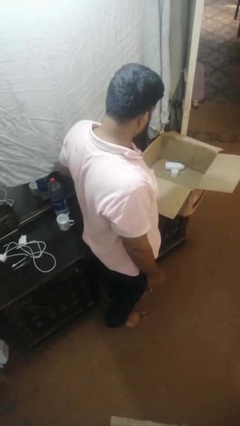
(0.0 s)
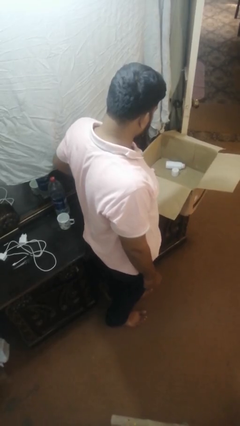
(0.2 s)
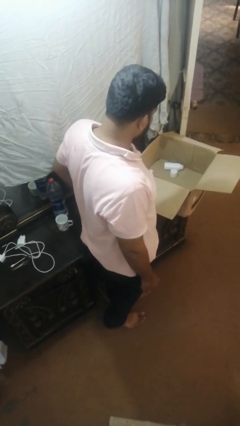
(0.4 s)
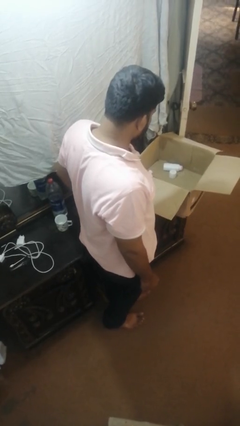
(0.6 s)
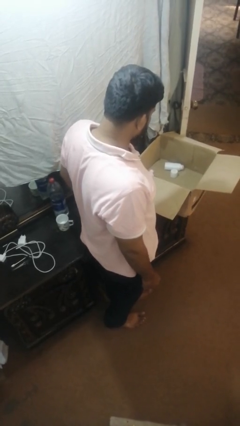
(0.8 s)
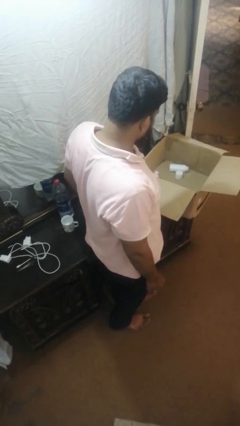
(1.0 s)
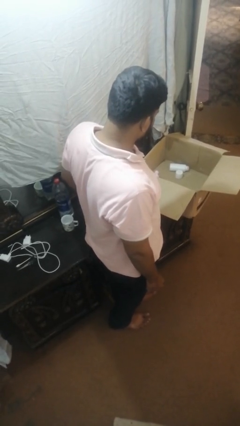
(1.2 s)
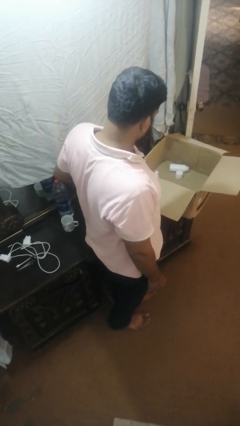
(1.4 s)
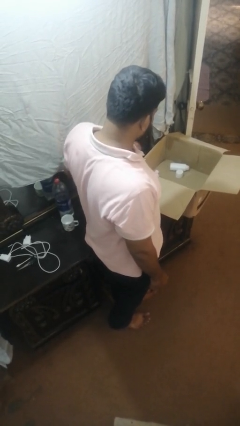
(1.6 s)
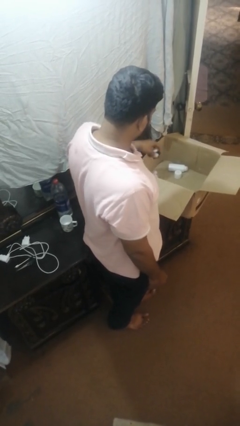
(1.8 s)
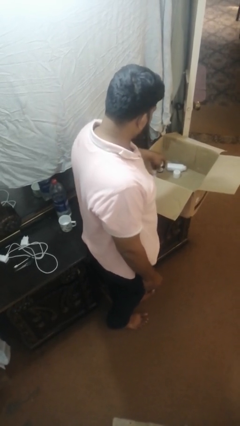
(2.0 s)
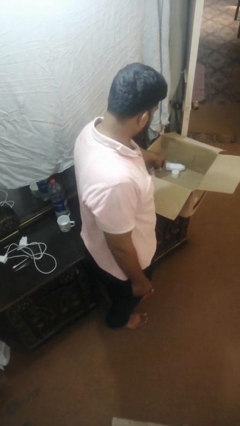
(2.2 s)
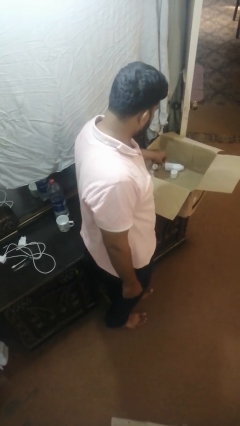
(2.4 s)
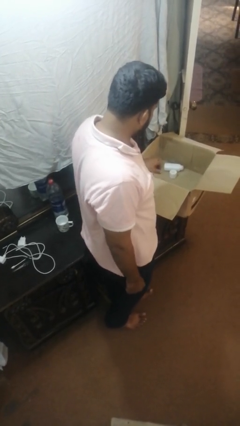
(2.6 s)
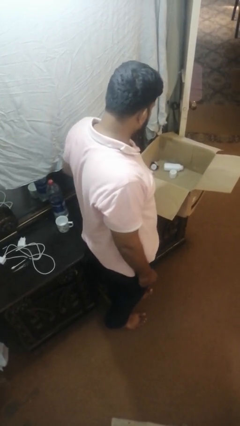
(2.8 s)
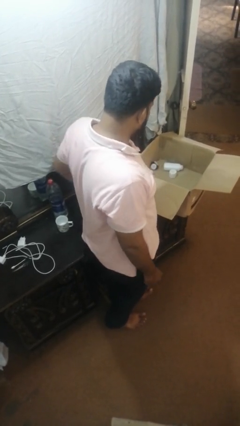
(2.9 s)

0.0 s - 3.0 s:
person puts object into box

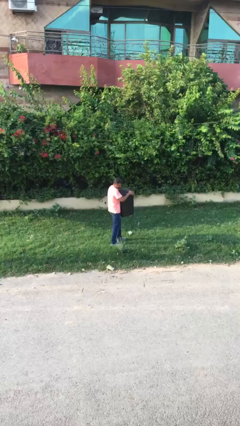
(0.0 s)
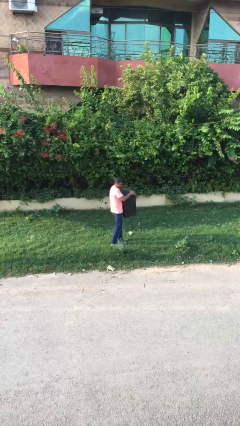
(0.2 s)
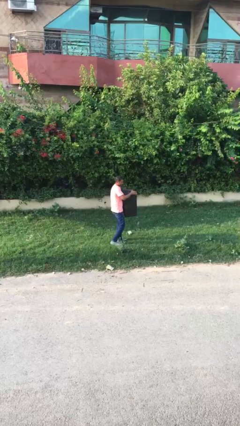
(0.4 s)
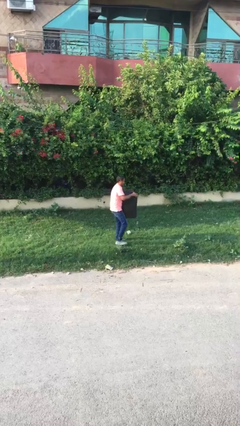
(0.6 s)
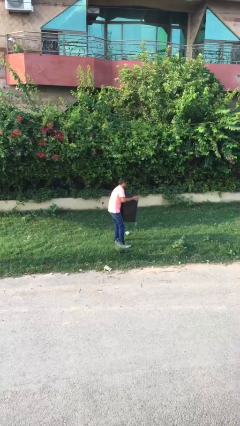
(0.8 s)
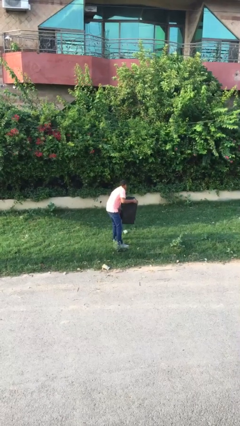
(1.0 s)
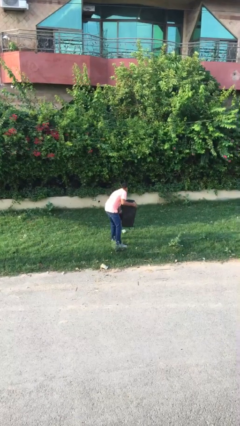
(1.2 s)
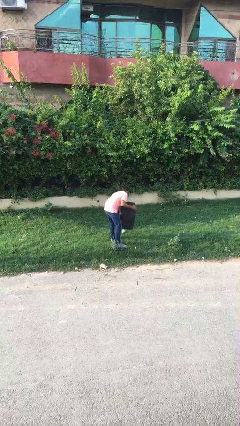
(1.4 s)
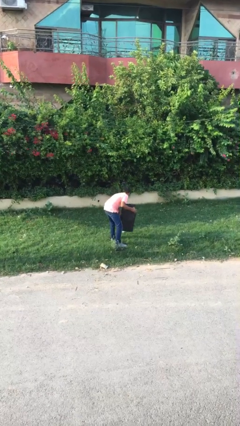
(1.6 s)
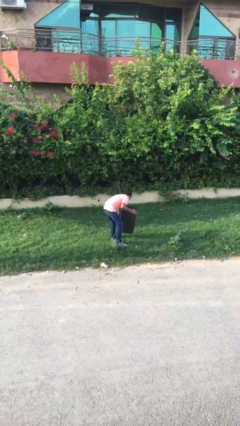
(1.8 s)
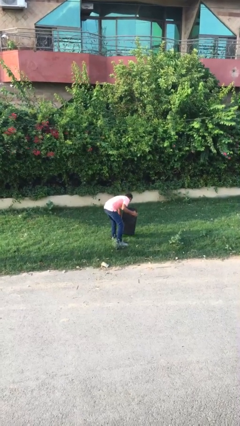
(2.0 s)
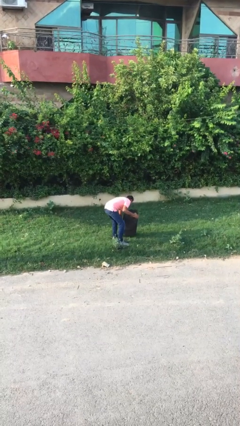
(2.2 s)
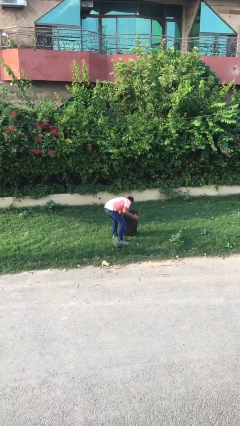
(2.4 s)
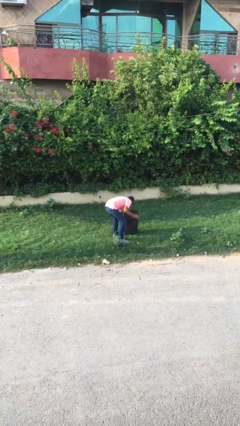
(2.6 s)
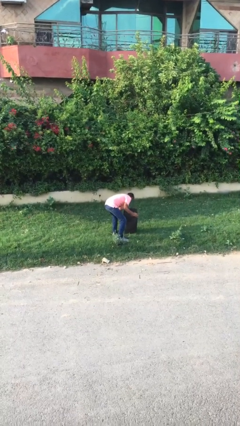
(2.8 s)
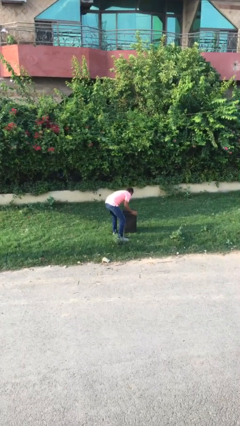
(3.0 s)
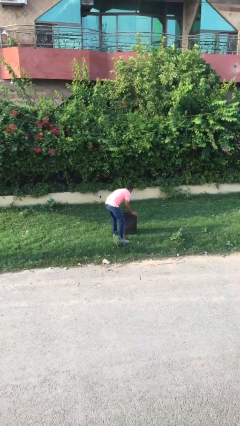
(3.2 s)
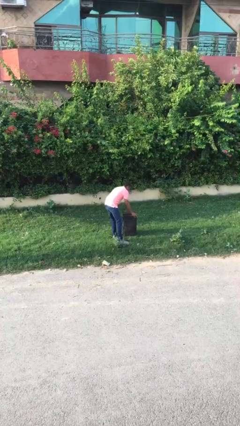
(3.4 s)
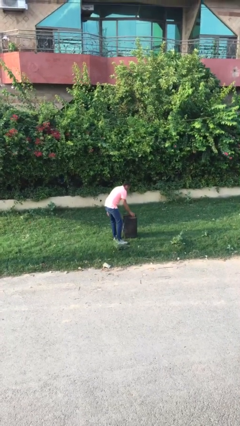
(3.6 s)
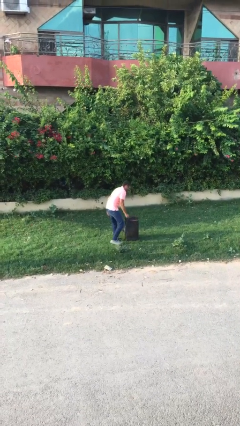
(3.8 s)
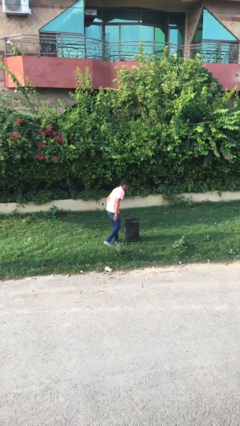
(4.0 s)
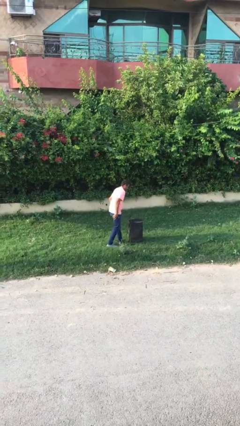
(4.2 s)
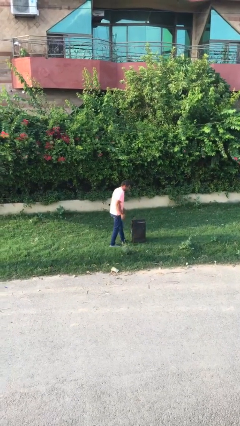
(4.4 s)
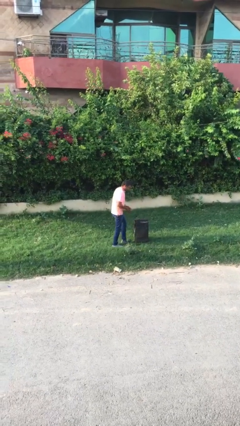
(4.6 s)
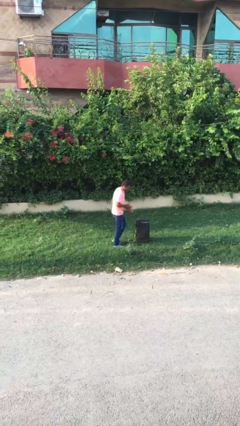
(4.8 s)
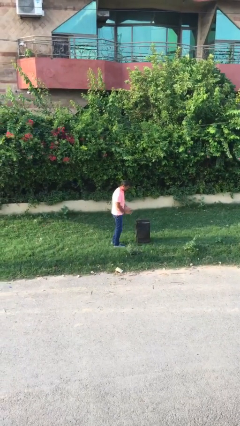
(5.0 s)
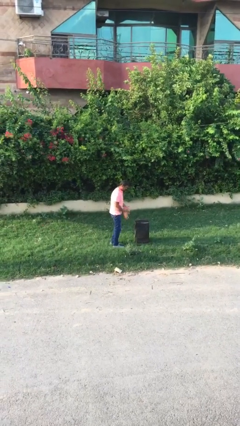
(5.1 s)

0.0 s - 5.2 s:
person puts down object on floor

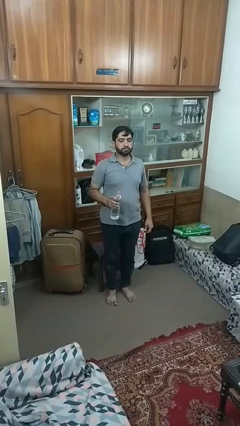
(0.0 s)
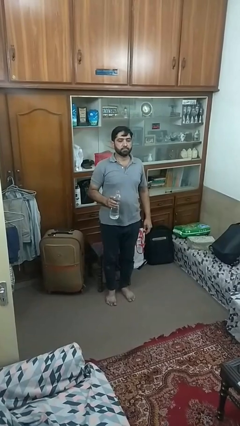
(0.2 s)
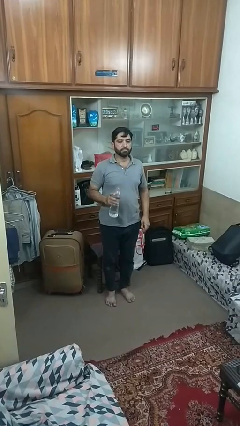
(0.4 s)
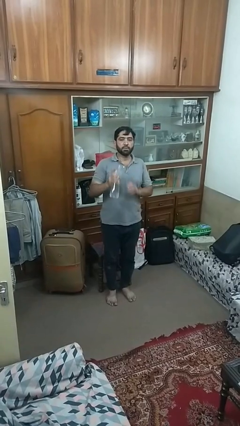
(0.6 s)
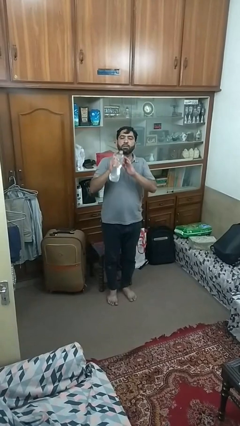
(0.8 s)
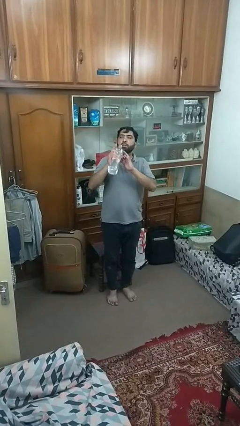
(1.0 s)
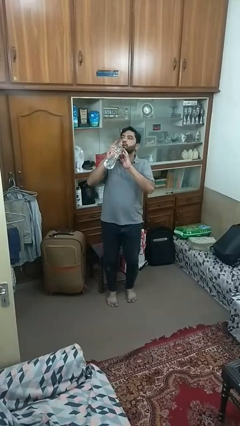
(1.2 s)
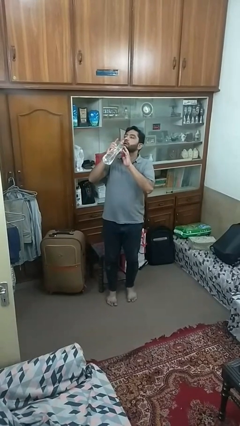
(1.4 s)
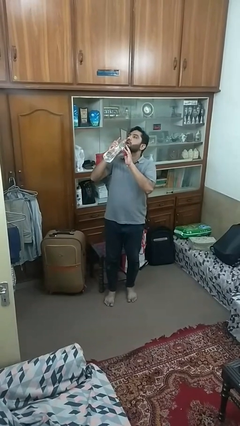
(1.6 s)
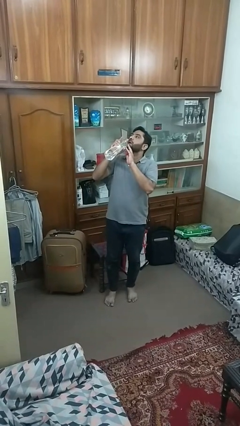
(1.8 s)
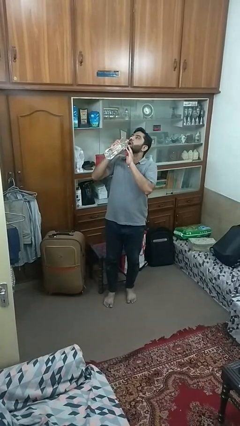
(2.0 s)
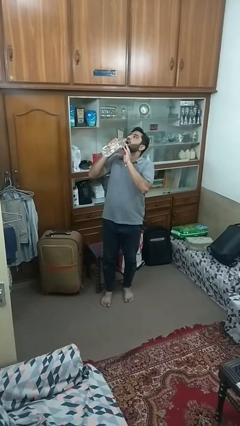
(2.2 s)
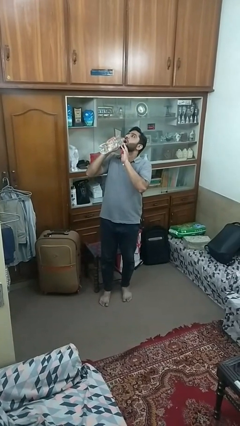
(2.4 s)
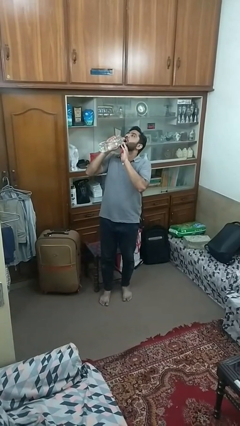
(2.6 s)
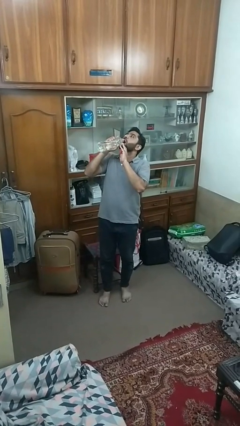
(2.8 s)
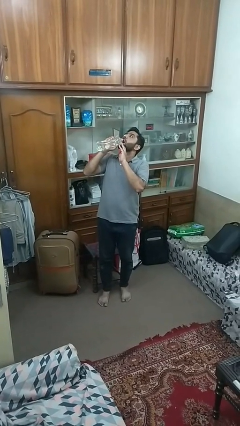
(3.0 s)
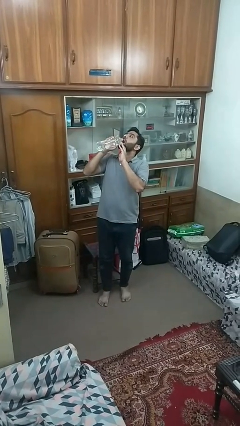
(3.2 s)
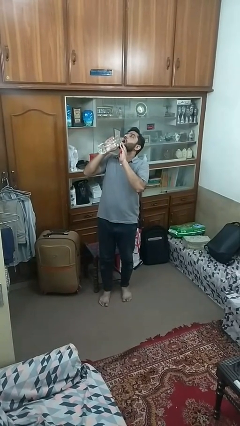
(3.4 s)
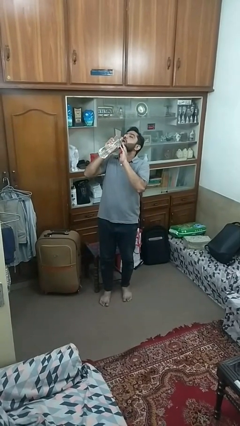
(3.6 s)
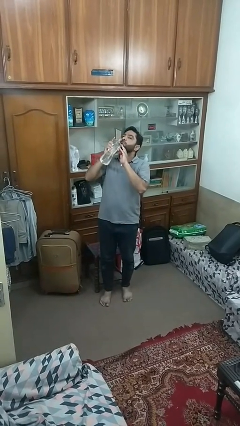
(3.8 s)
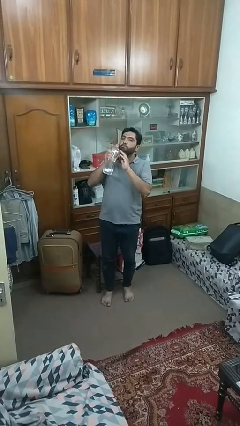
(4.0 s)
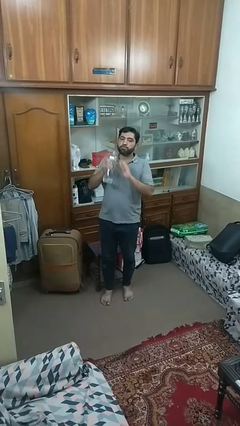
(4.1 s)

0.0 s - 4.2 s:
person drinks from bottle

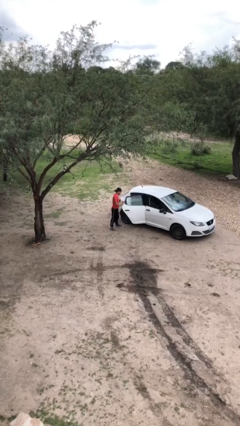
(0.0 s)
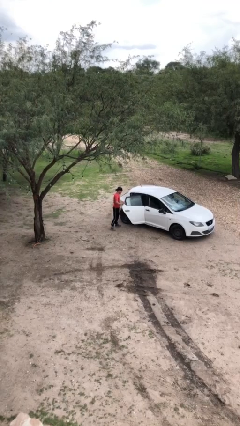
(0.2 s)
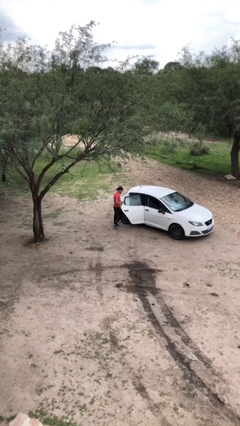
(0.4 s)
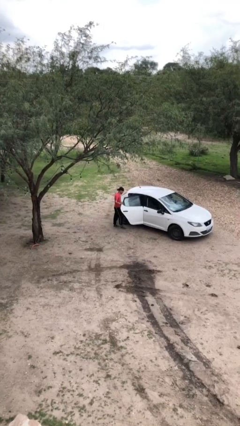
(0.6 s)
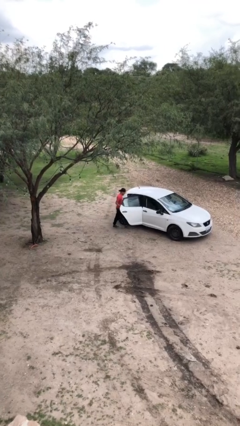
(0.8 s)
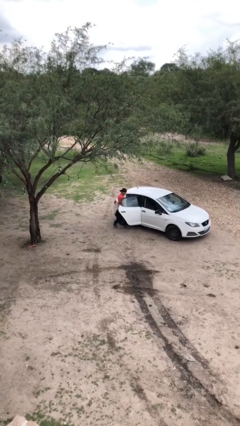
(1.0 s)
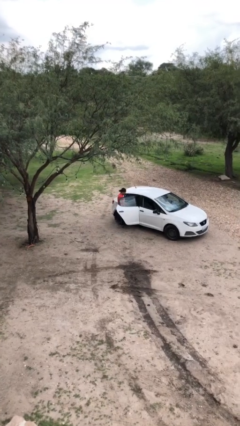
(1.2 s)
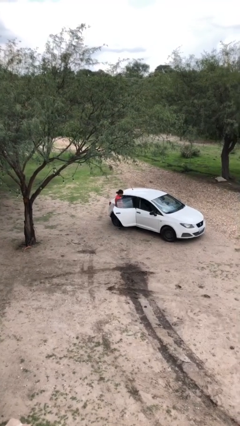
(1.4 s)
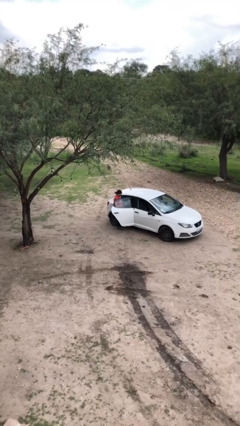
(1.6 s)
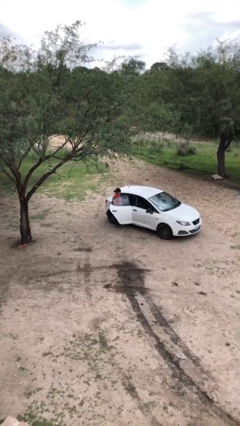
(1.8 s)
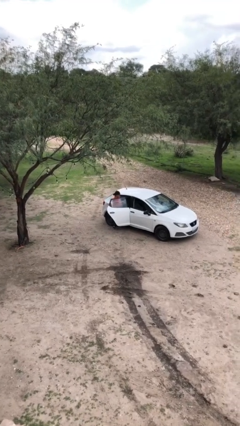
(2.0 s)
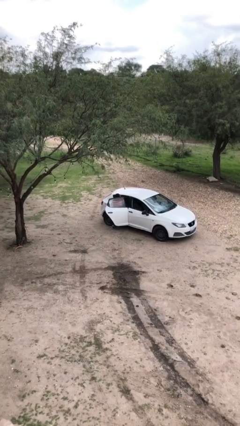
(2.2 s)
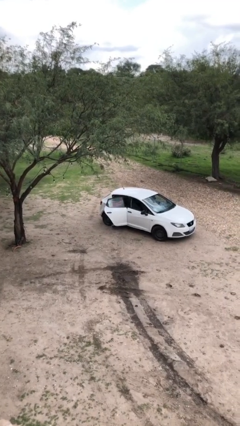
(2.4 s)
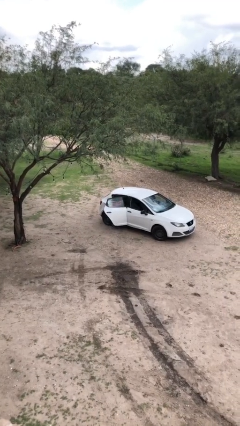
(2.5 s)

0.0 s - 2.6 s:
person enters car

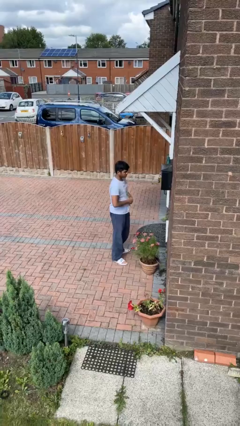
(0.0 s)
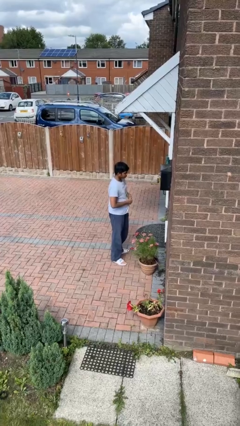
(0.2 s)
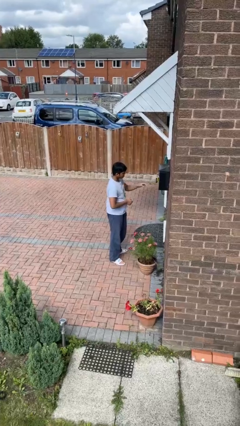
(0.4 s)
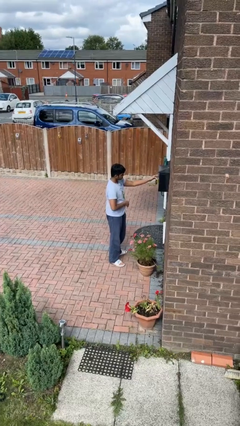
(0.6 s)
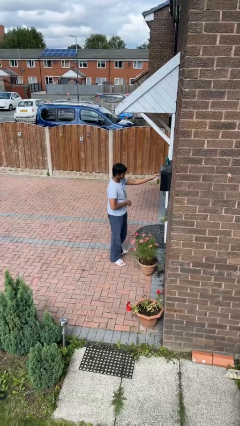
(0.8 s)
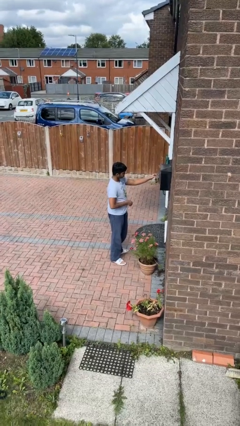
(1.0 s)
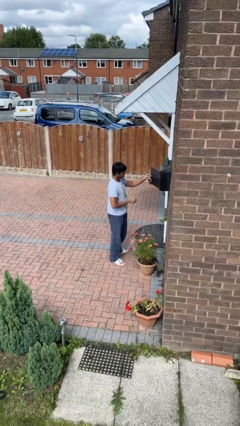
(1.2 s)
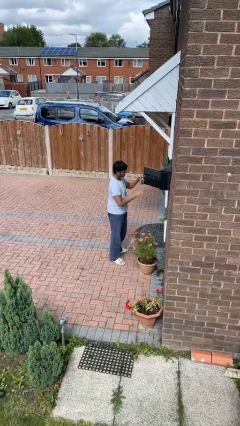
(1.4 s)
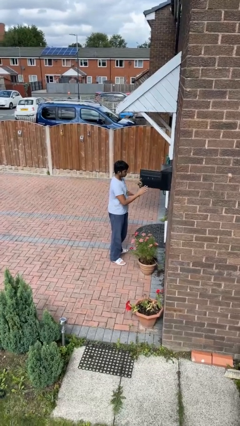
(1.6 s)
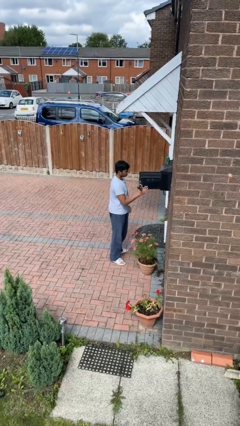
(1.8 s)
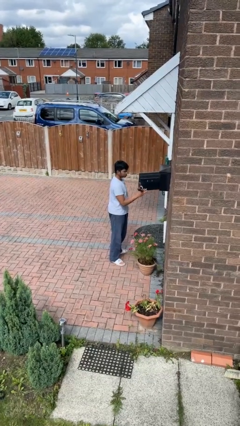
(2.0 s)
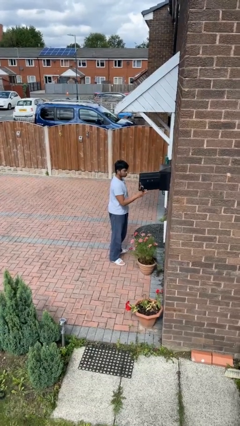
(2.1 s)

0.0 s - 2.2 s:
person opens mailbox

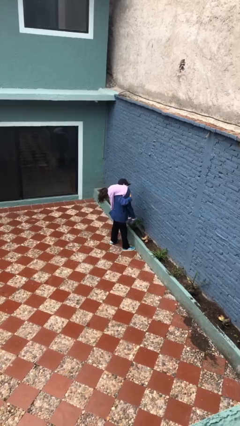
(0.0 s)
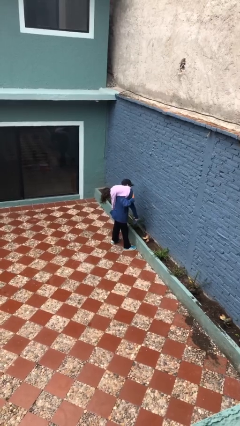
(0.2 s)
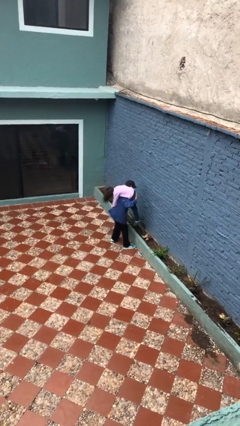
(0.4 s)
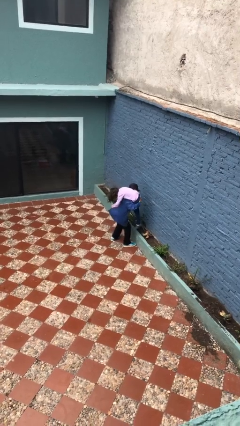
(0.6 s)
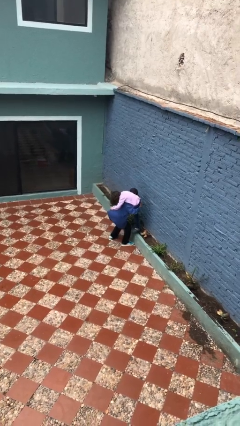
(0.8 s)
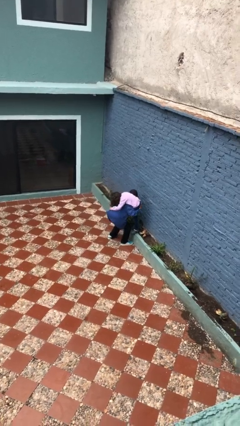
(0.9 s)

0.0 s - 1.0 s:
person puts down person
